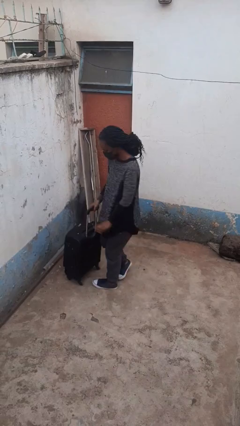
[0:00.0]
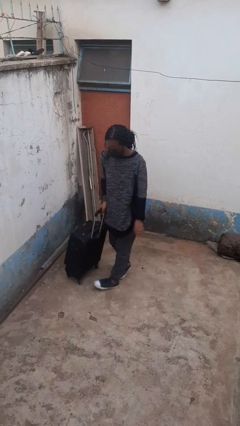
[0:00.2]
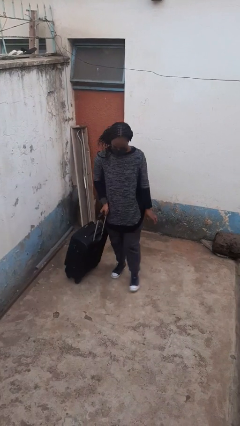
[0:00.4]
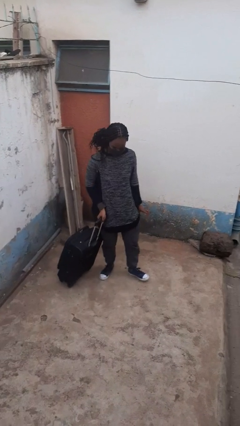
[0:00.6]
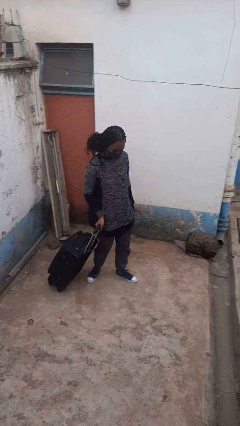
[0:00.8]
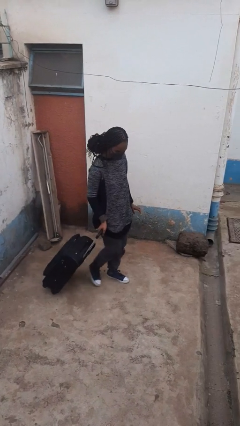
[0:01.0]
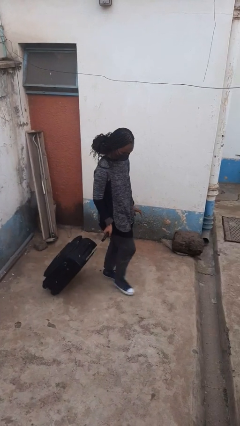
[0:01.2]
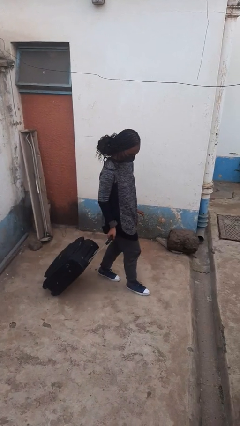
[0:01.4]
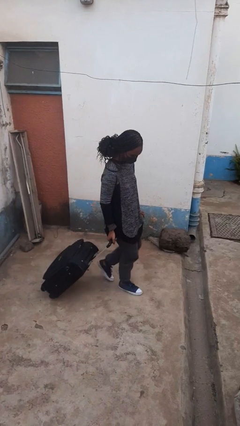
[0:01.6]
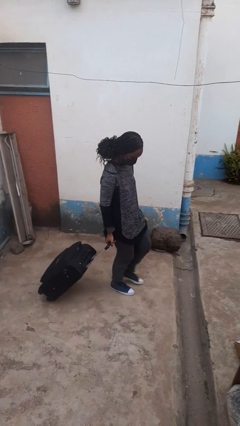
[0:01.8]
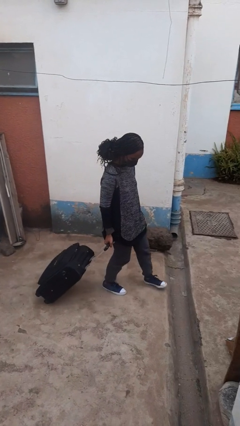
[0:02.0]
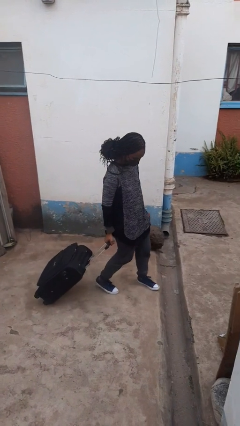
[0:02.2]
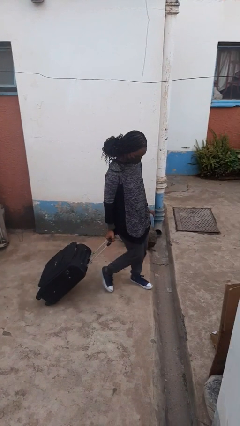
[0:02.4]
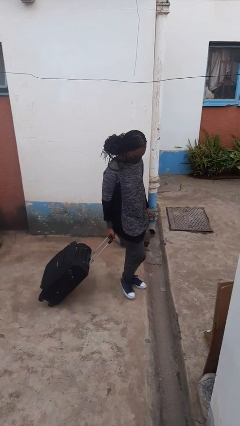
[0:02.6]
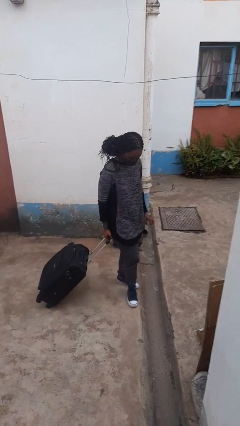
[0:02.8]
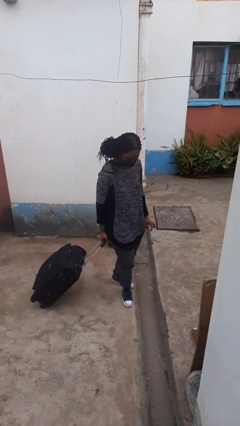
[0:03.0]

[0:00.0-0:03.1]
person pulls wheeled cart

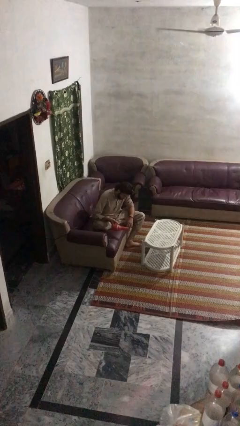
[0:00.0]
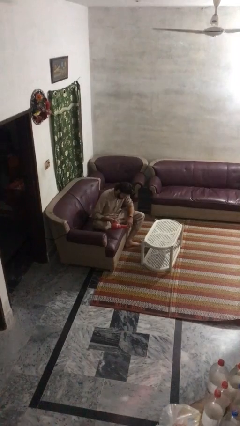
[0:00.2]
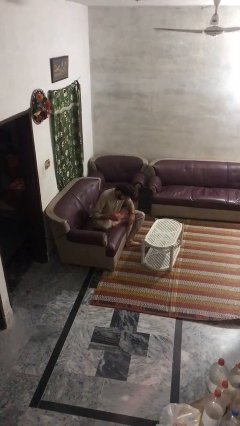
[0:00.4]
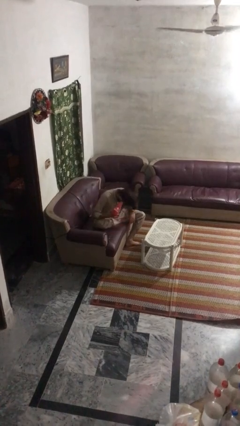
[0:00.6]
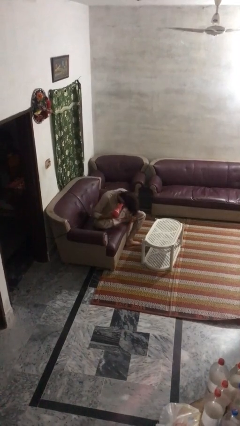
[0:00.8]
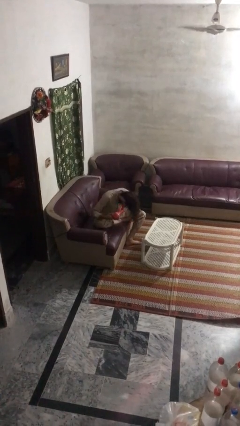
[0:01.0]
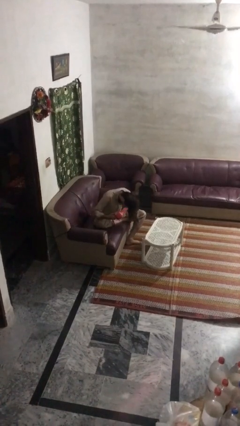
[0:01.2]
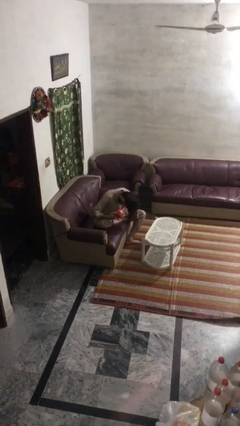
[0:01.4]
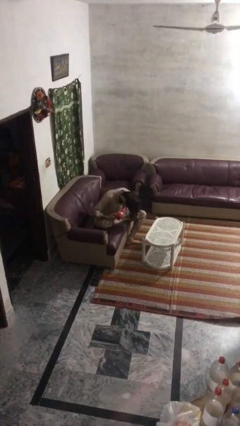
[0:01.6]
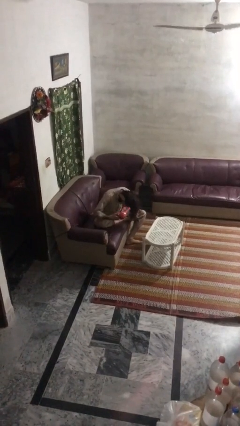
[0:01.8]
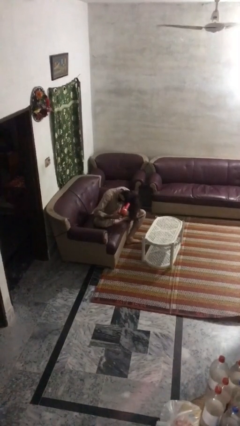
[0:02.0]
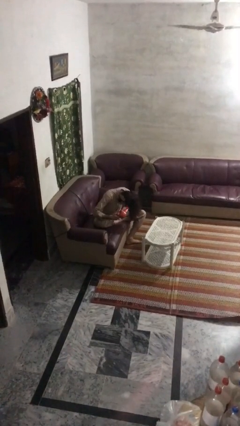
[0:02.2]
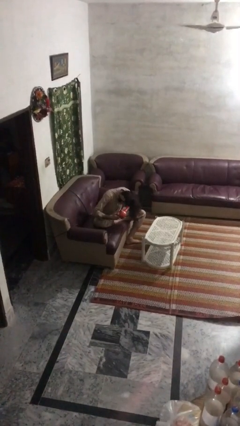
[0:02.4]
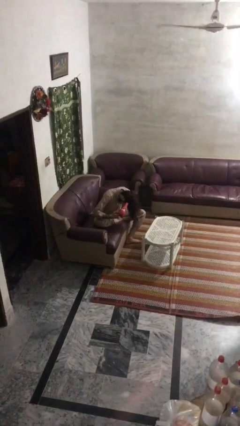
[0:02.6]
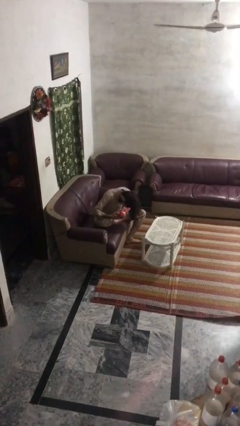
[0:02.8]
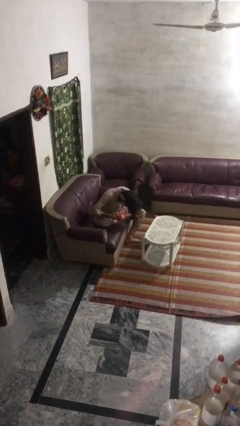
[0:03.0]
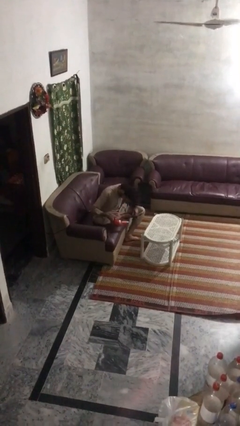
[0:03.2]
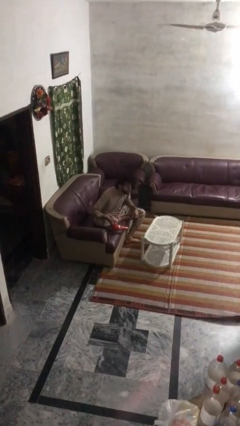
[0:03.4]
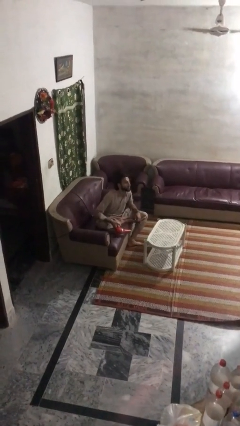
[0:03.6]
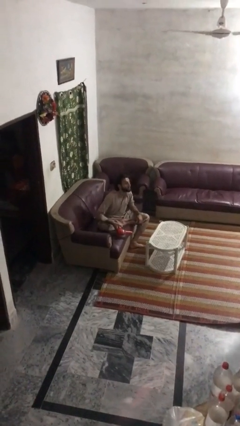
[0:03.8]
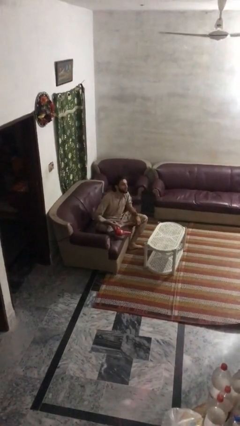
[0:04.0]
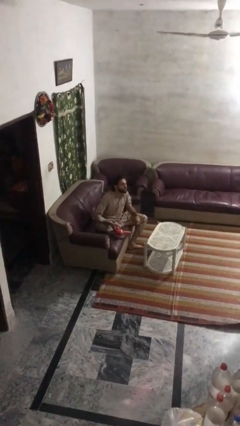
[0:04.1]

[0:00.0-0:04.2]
person dries hair with hairdryer

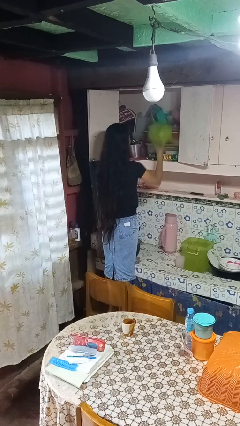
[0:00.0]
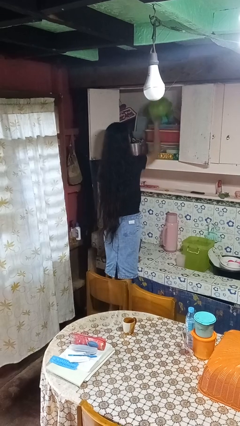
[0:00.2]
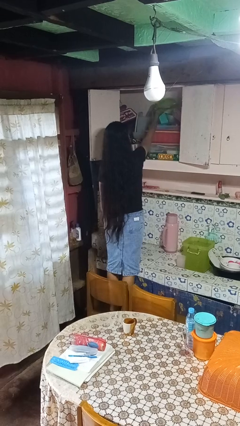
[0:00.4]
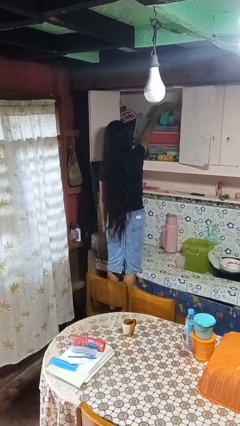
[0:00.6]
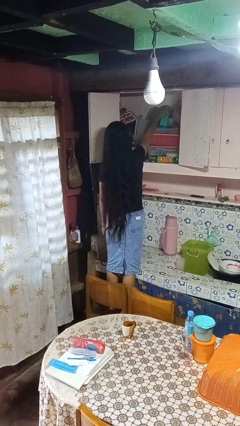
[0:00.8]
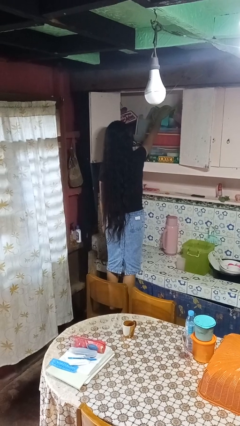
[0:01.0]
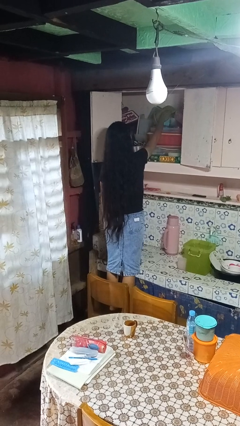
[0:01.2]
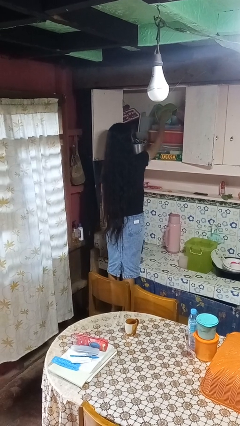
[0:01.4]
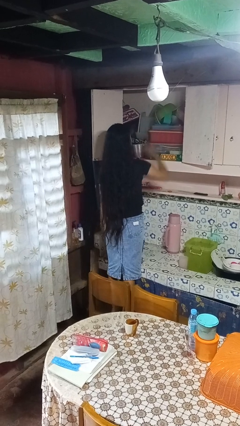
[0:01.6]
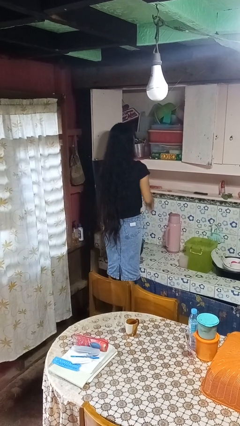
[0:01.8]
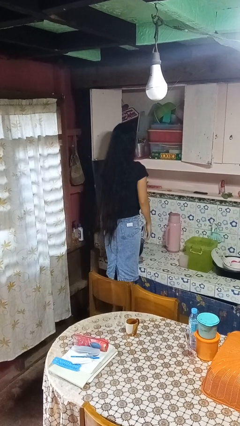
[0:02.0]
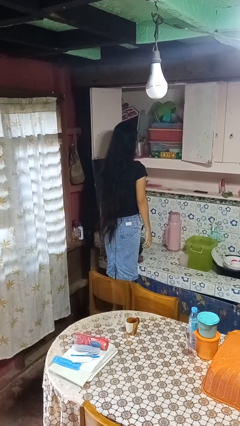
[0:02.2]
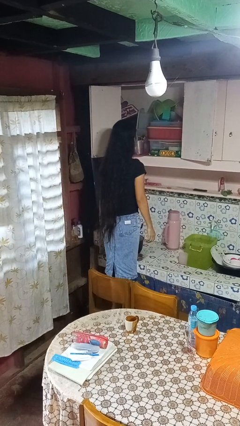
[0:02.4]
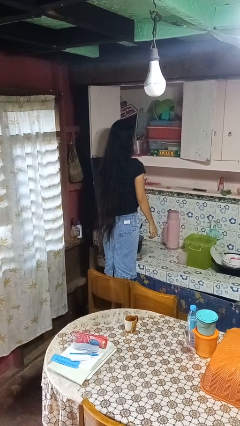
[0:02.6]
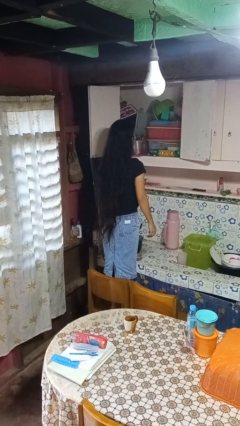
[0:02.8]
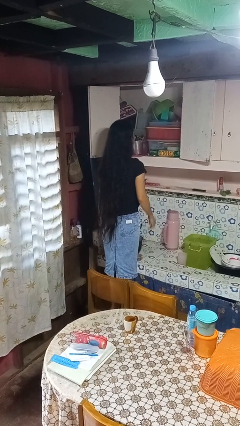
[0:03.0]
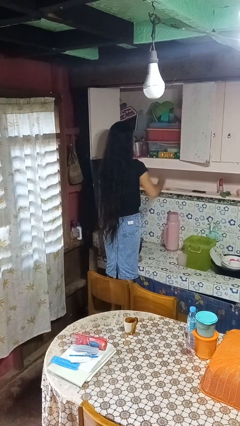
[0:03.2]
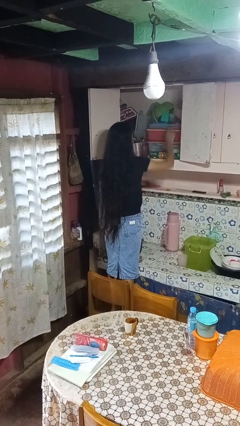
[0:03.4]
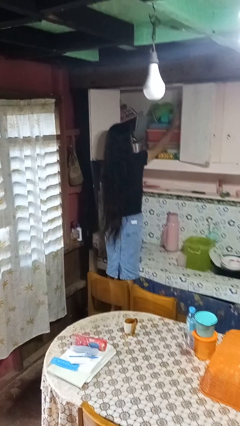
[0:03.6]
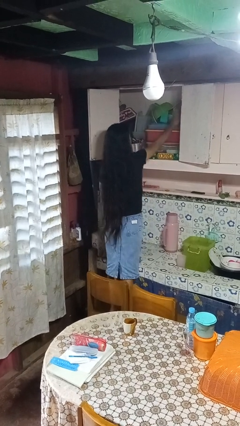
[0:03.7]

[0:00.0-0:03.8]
person puts object in cabinet

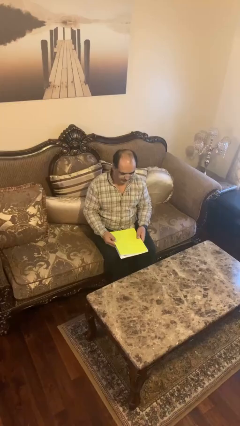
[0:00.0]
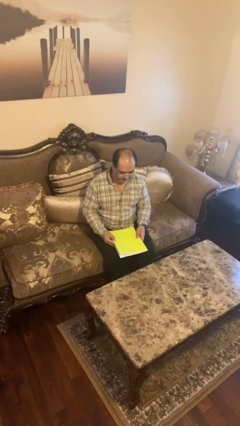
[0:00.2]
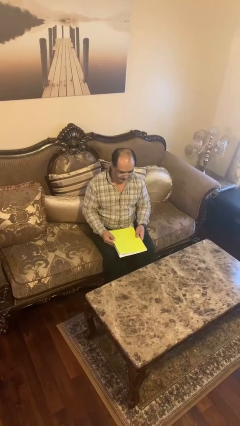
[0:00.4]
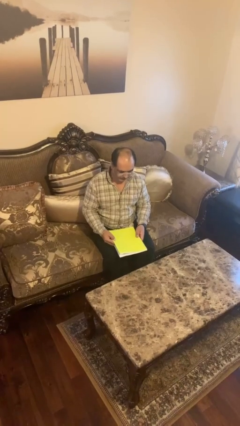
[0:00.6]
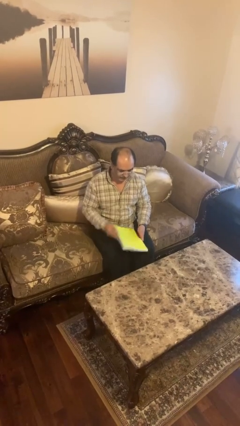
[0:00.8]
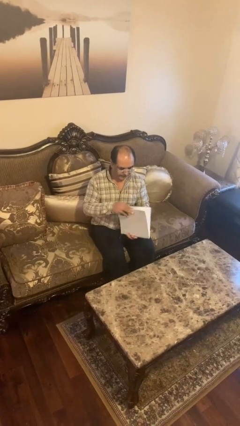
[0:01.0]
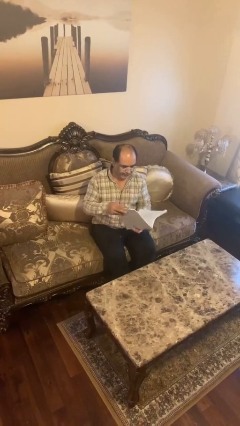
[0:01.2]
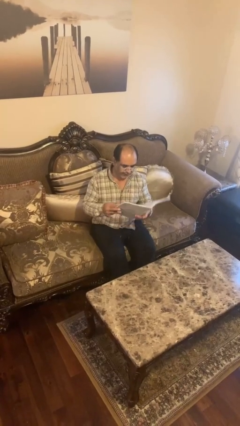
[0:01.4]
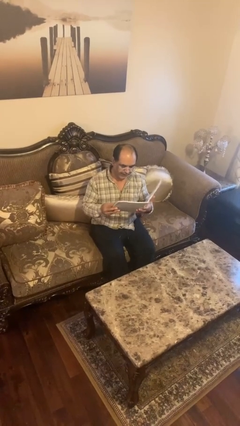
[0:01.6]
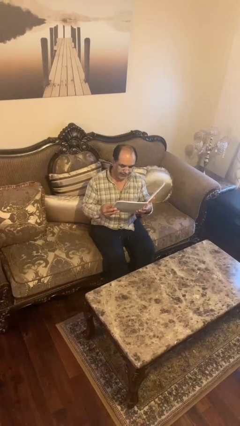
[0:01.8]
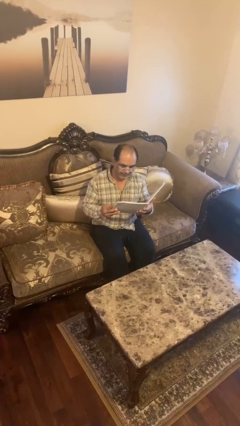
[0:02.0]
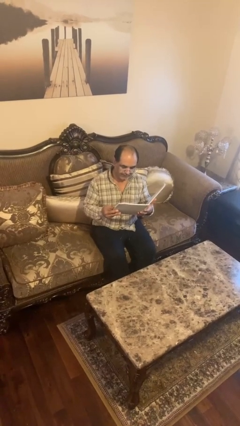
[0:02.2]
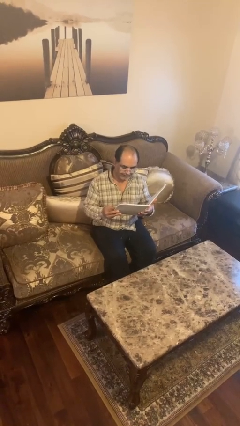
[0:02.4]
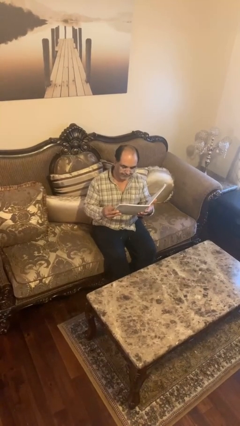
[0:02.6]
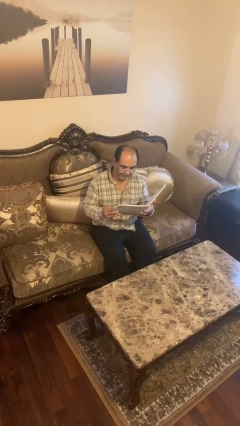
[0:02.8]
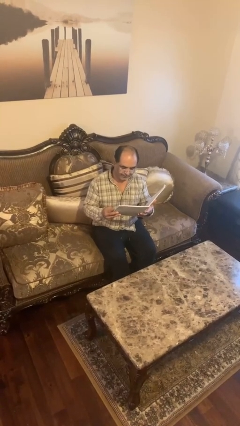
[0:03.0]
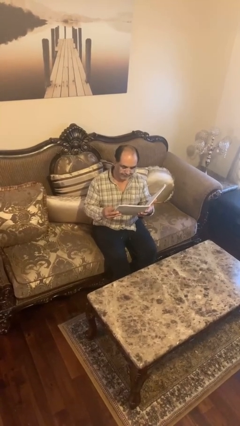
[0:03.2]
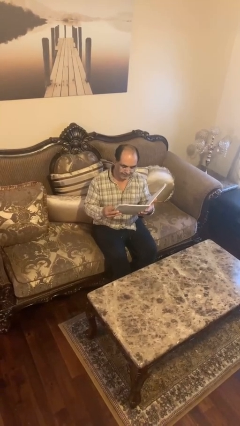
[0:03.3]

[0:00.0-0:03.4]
person reads document

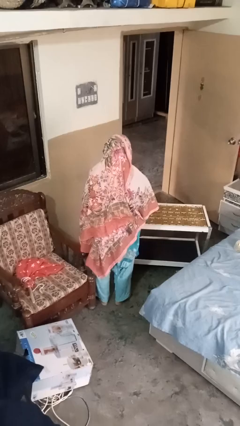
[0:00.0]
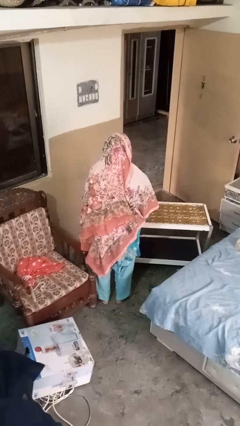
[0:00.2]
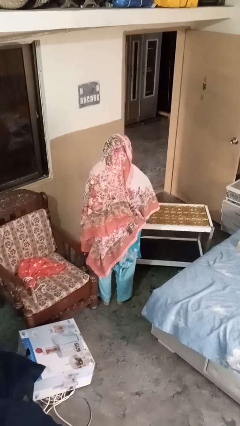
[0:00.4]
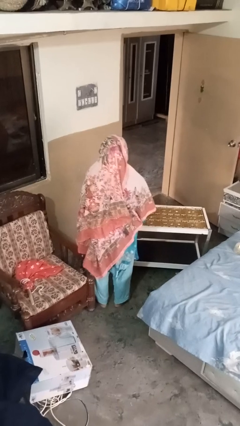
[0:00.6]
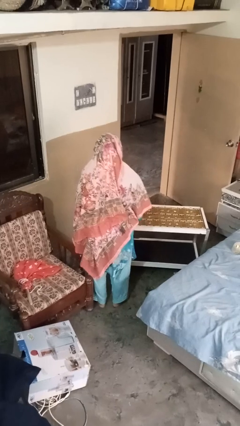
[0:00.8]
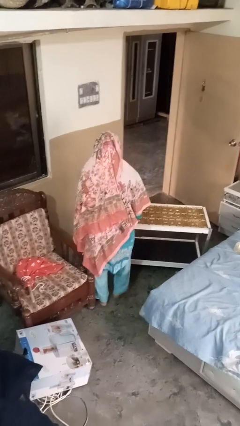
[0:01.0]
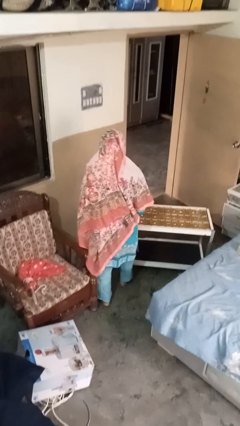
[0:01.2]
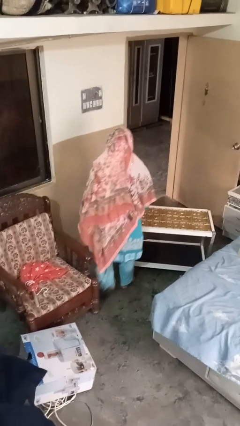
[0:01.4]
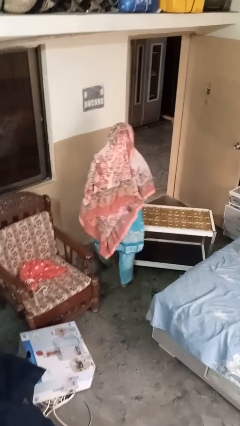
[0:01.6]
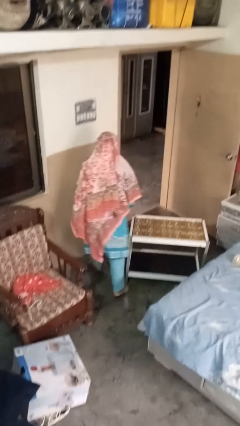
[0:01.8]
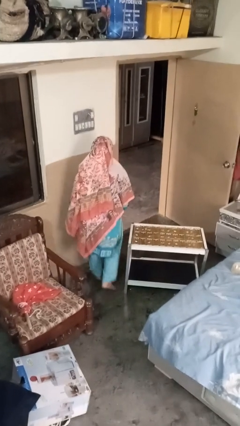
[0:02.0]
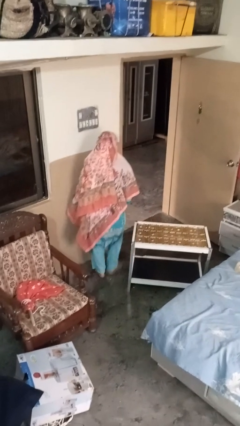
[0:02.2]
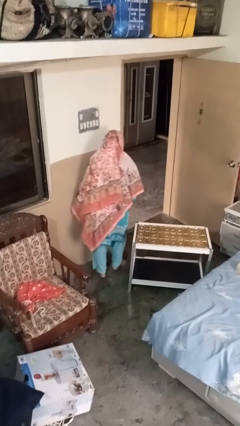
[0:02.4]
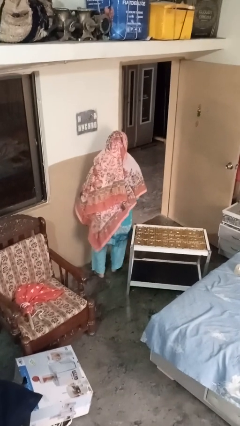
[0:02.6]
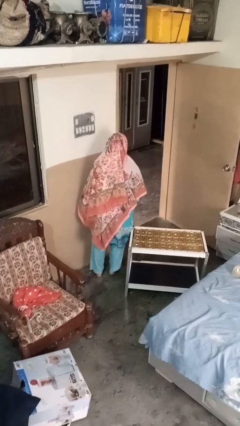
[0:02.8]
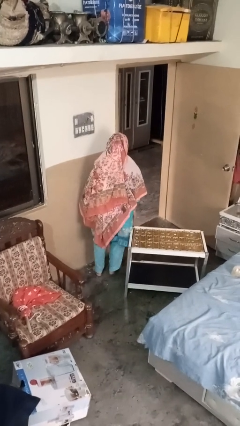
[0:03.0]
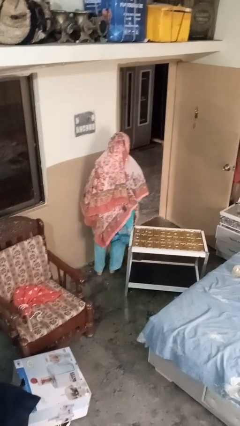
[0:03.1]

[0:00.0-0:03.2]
person bumps into table
